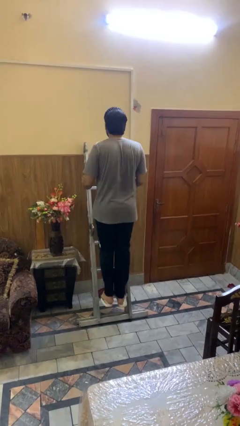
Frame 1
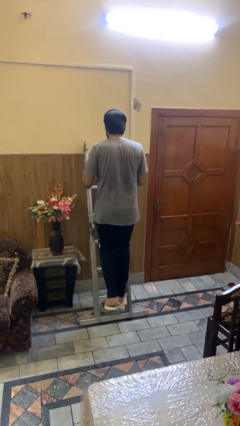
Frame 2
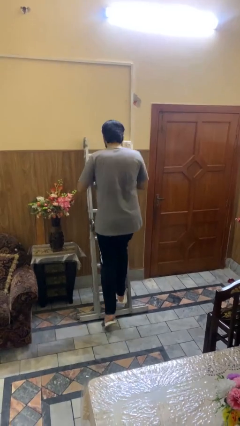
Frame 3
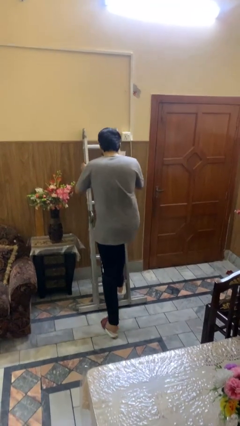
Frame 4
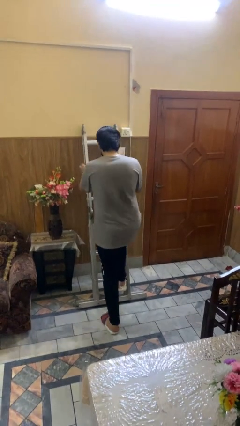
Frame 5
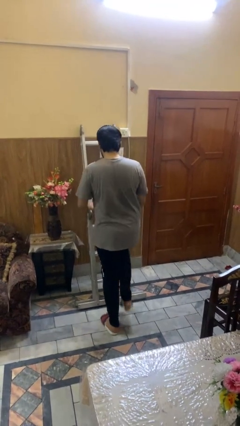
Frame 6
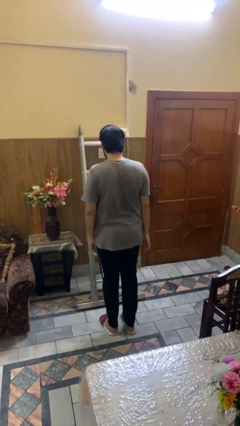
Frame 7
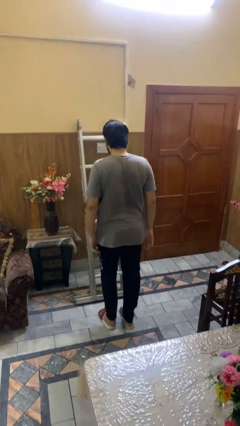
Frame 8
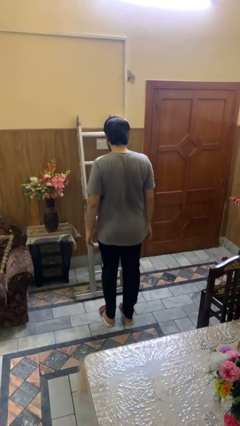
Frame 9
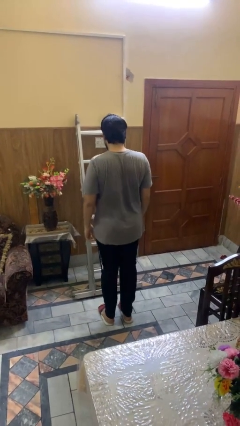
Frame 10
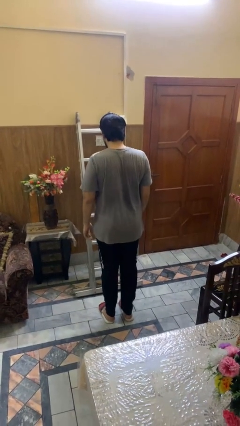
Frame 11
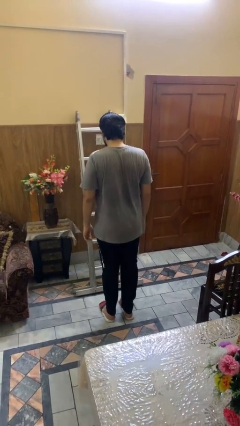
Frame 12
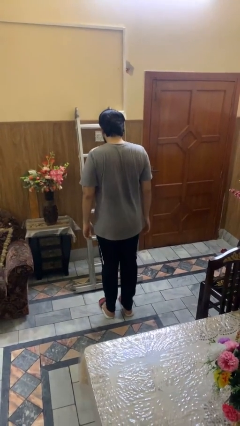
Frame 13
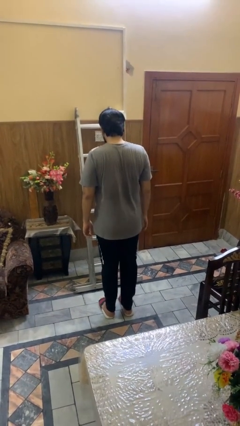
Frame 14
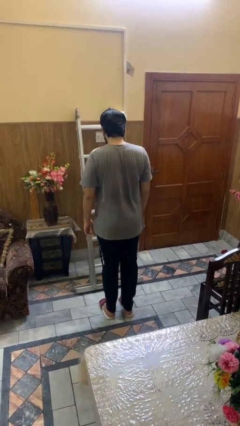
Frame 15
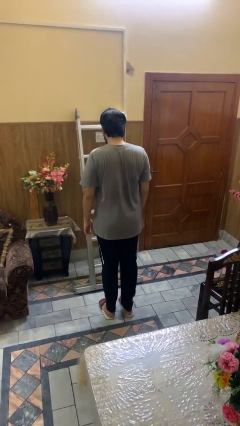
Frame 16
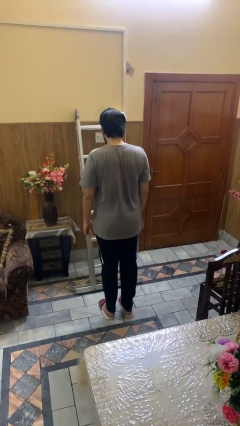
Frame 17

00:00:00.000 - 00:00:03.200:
person climbs down ladder

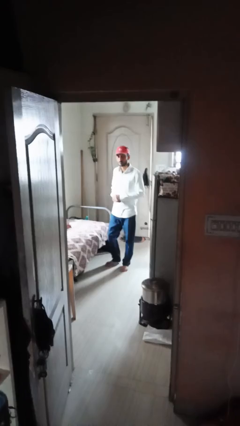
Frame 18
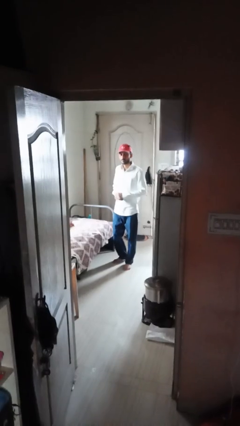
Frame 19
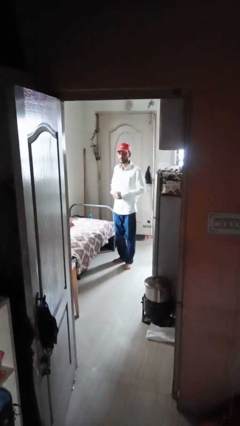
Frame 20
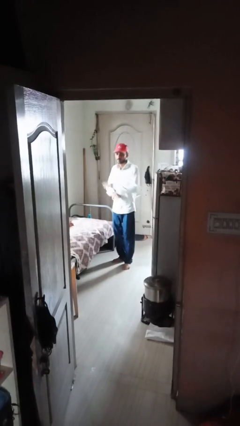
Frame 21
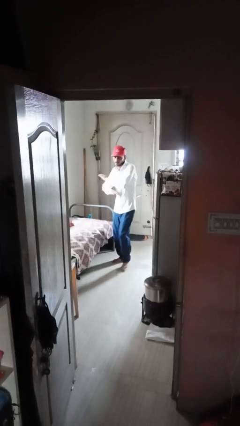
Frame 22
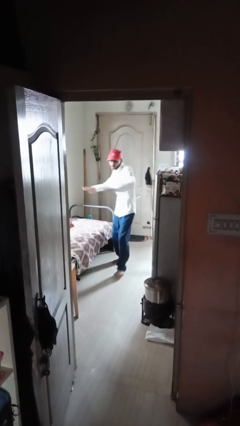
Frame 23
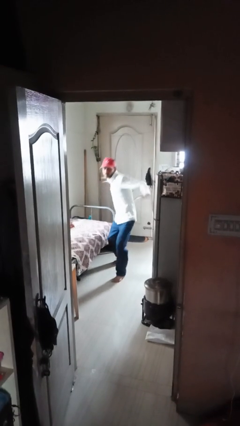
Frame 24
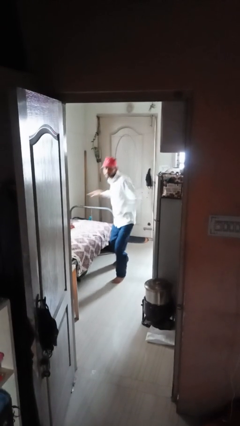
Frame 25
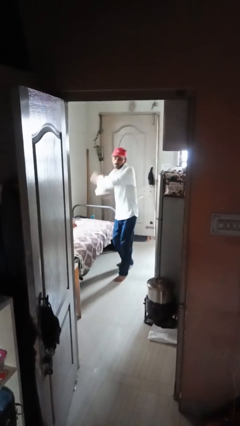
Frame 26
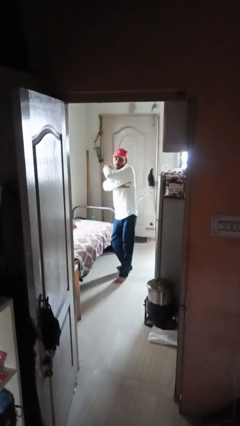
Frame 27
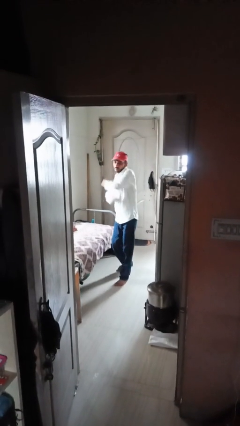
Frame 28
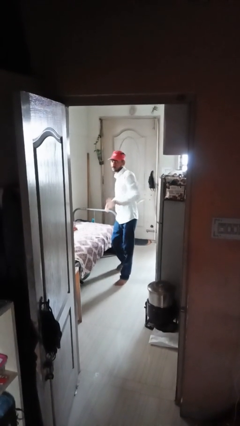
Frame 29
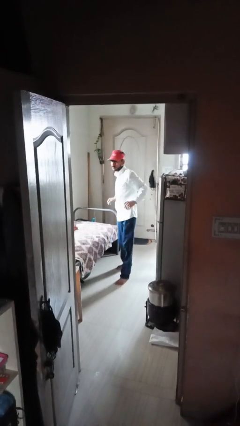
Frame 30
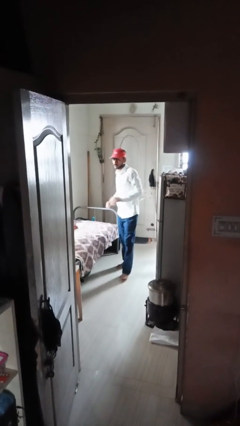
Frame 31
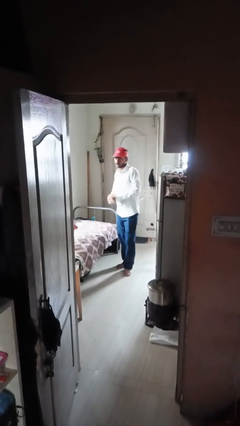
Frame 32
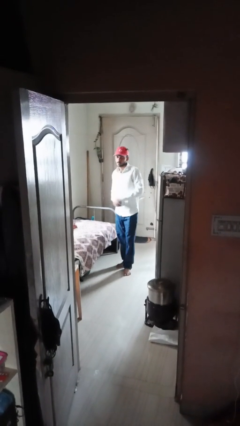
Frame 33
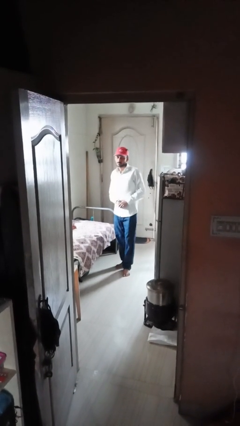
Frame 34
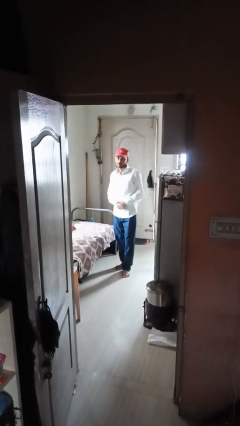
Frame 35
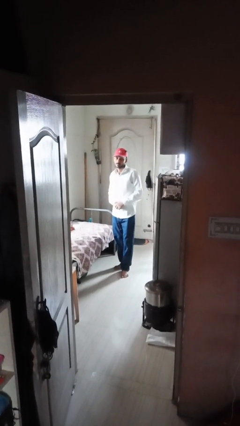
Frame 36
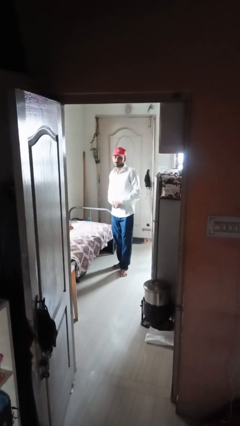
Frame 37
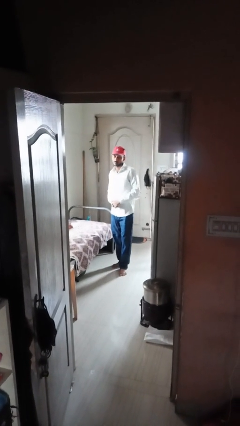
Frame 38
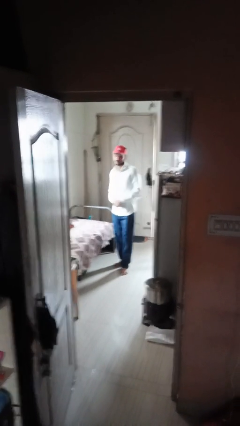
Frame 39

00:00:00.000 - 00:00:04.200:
person karate chop

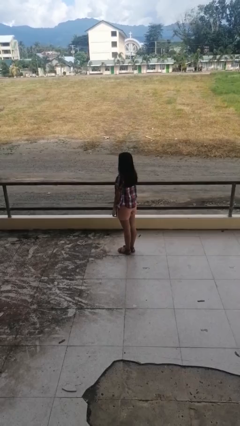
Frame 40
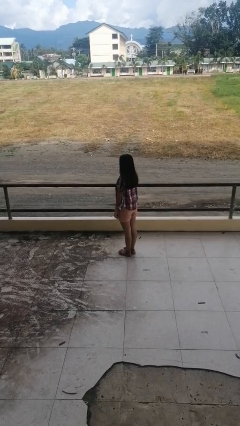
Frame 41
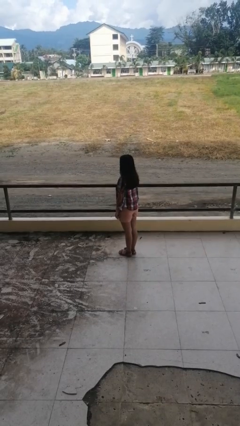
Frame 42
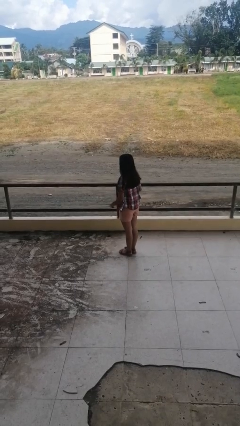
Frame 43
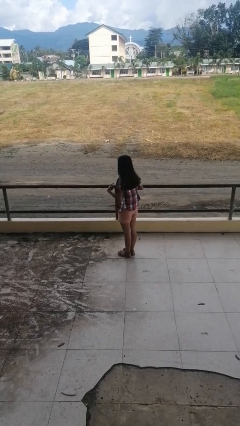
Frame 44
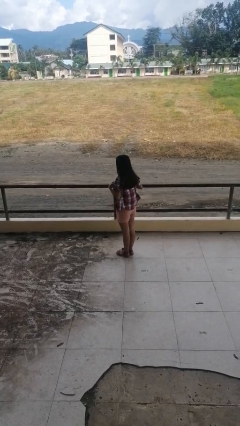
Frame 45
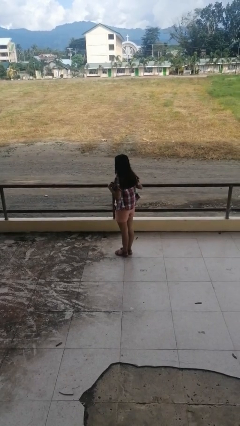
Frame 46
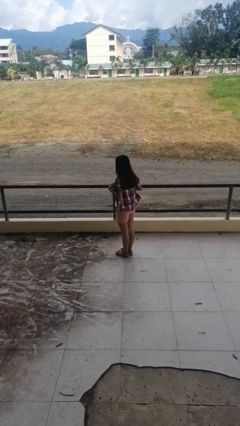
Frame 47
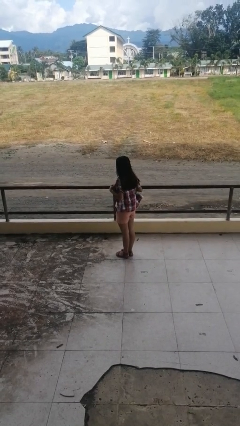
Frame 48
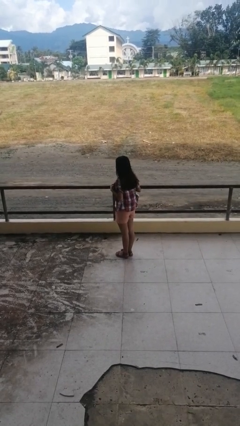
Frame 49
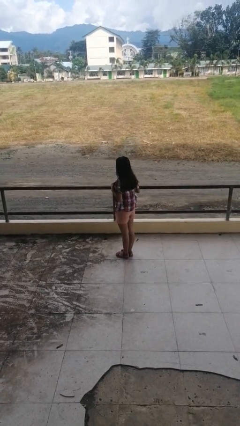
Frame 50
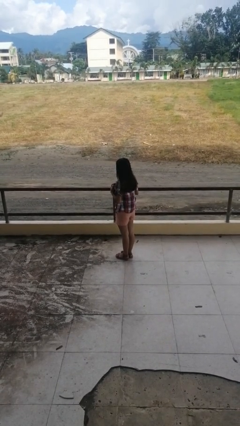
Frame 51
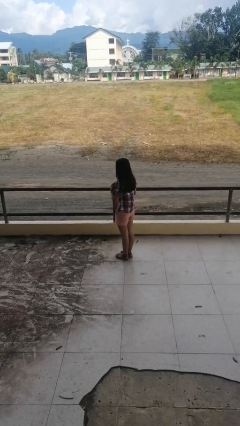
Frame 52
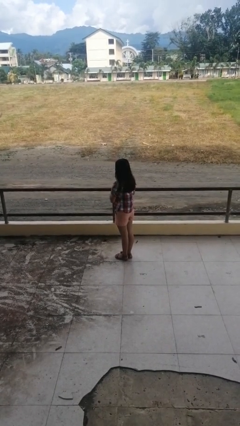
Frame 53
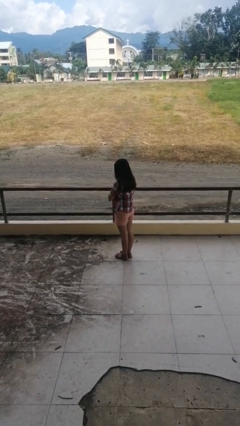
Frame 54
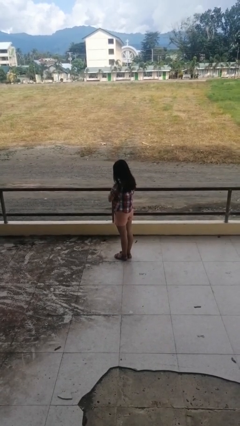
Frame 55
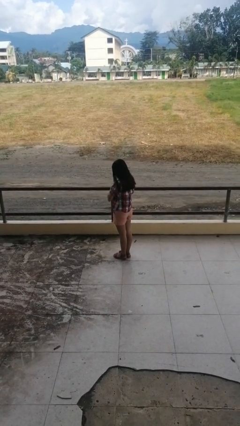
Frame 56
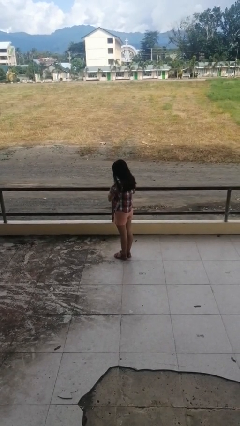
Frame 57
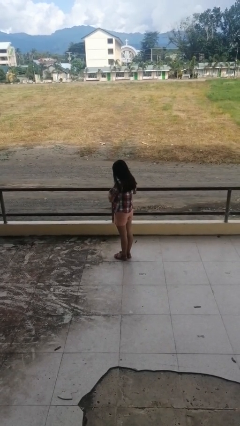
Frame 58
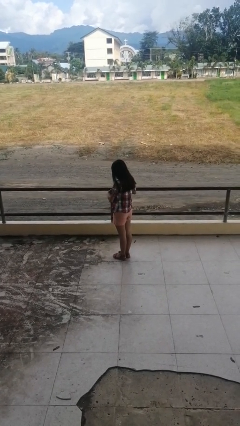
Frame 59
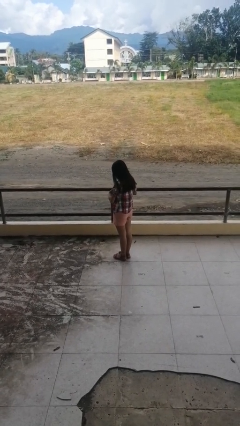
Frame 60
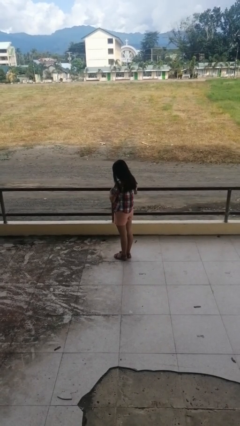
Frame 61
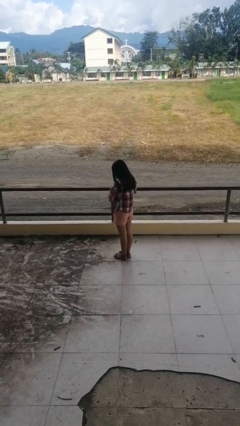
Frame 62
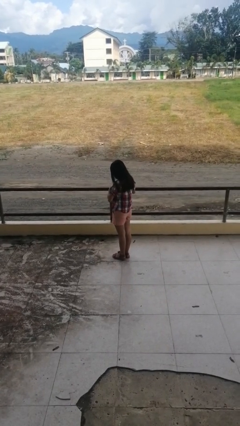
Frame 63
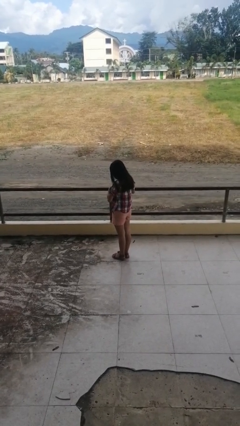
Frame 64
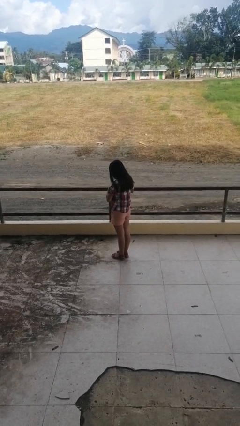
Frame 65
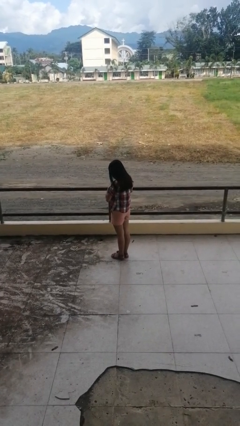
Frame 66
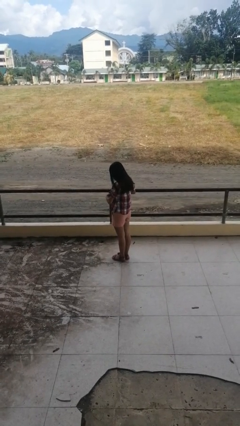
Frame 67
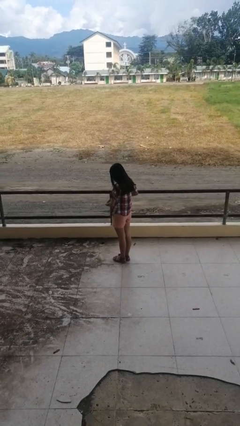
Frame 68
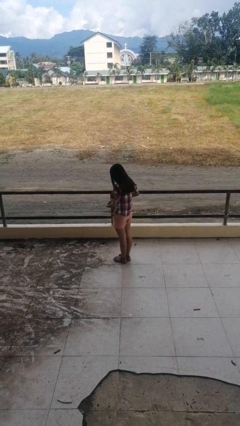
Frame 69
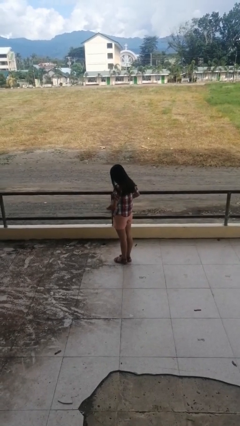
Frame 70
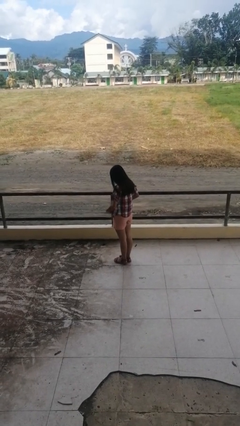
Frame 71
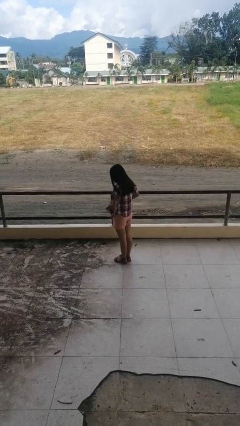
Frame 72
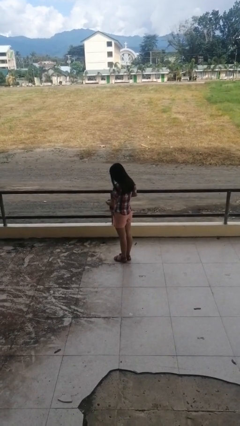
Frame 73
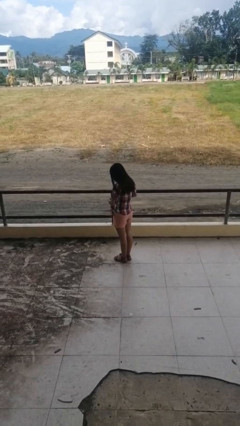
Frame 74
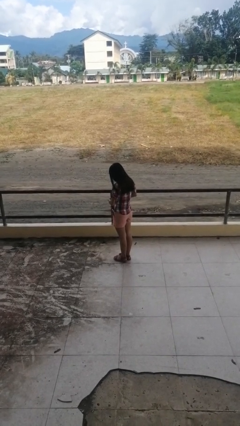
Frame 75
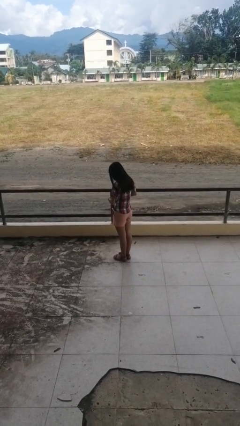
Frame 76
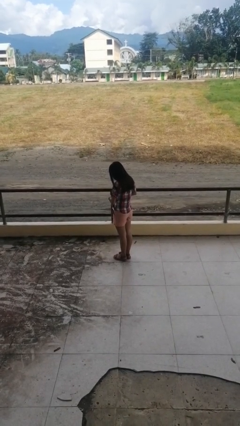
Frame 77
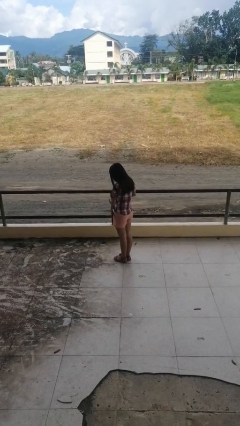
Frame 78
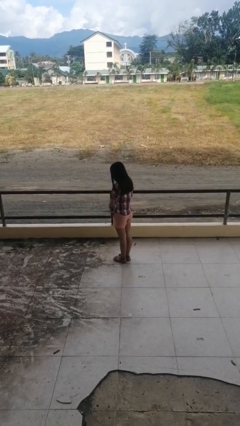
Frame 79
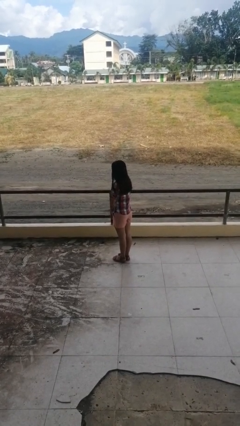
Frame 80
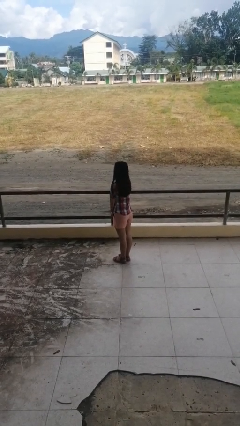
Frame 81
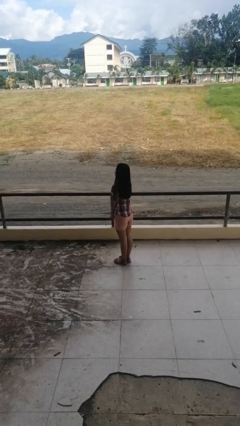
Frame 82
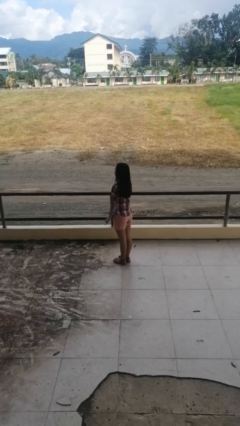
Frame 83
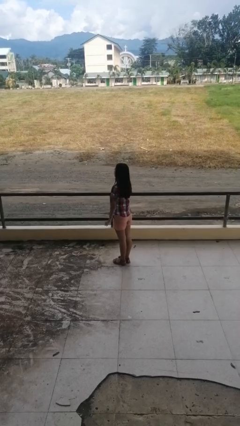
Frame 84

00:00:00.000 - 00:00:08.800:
person buttons shirt

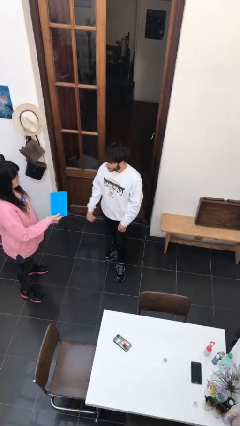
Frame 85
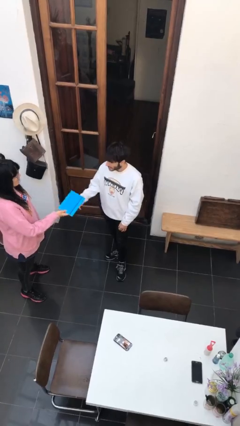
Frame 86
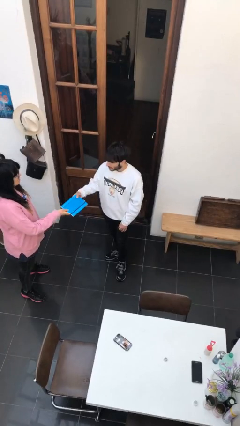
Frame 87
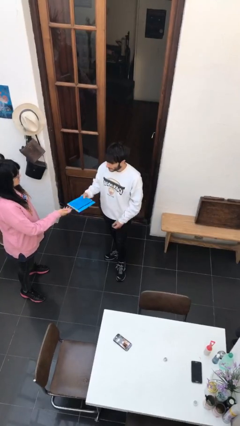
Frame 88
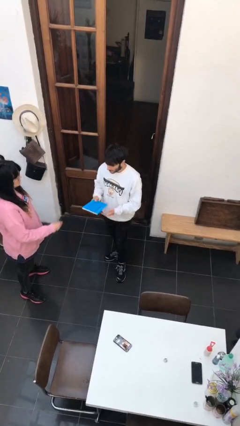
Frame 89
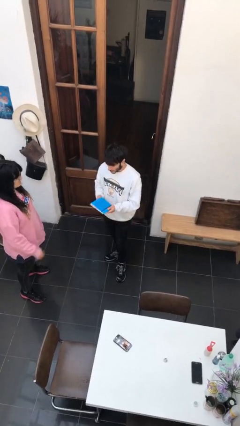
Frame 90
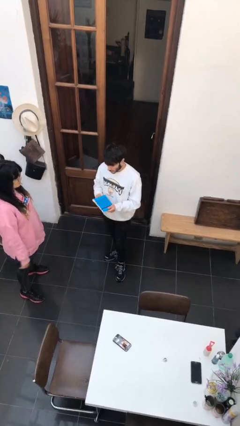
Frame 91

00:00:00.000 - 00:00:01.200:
person transfers object to person
